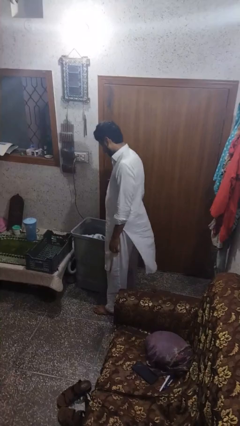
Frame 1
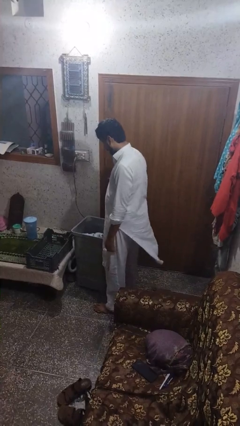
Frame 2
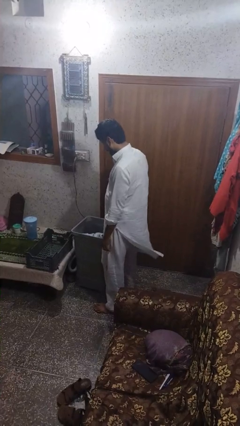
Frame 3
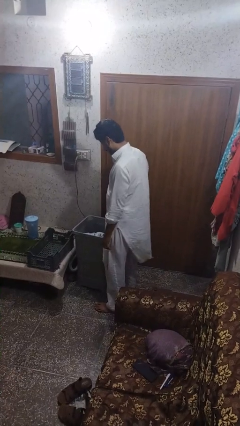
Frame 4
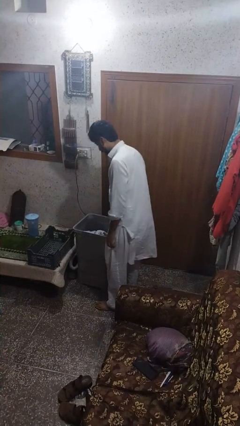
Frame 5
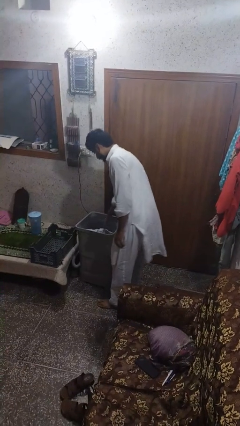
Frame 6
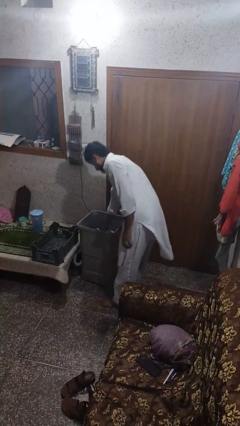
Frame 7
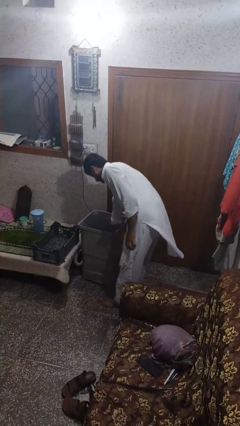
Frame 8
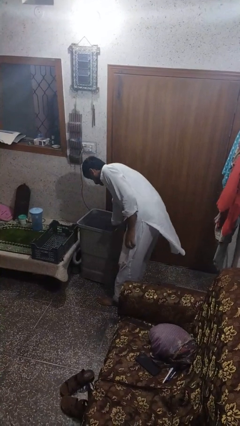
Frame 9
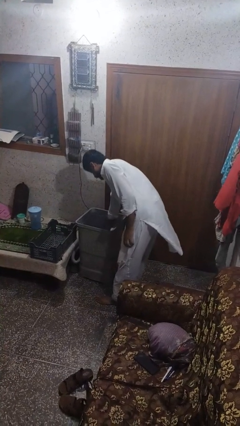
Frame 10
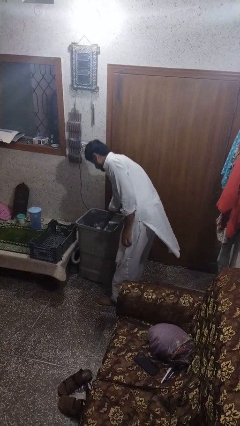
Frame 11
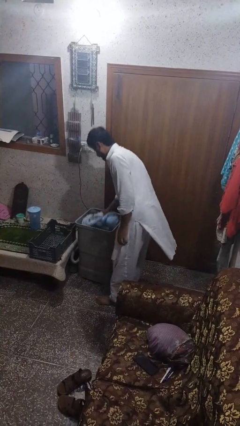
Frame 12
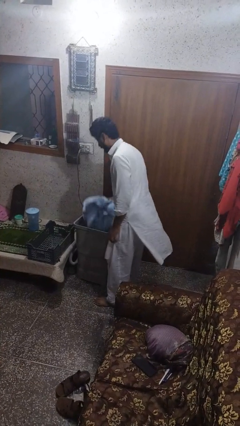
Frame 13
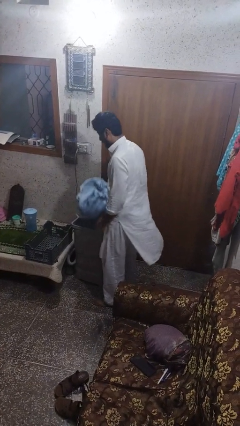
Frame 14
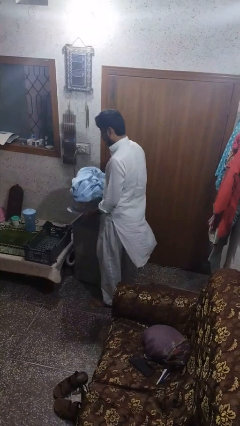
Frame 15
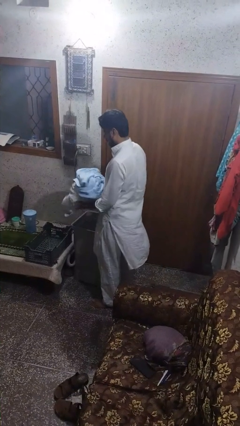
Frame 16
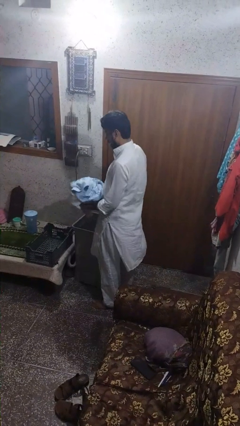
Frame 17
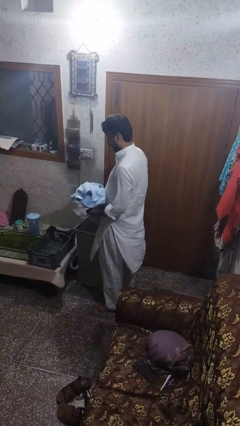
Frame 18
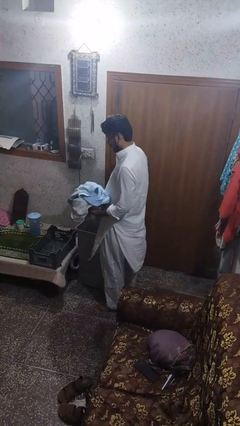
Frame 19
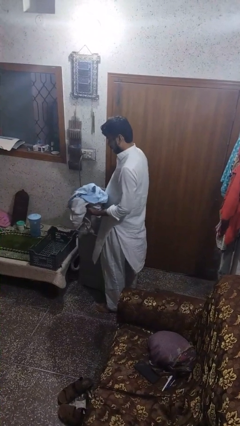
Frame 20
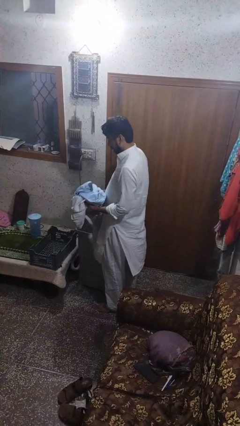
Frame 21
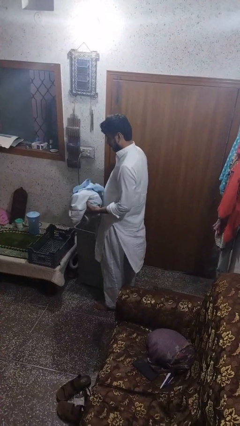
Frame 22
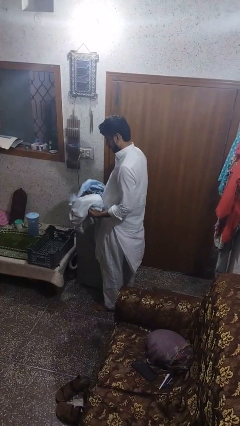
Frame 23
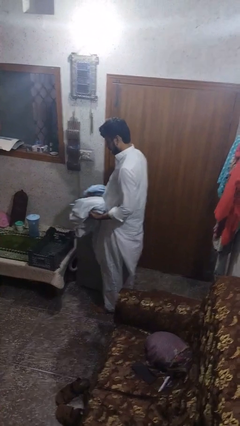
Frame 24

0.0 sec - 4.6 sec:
person unloads dryer

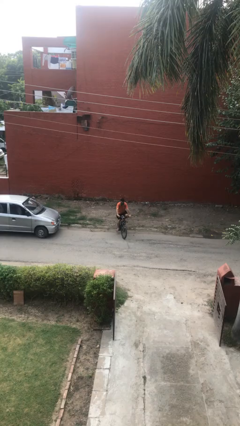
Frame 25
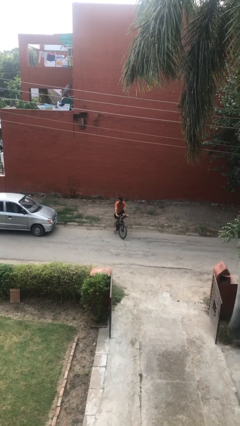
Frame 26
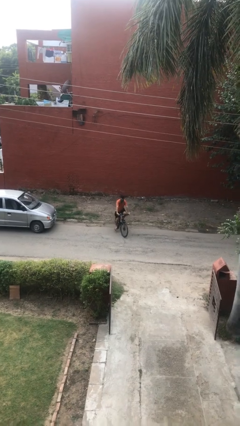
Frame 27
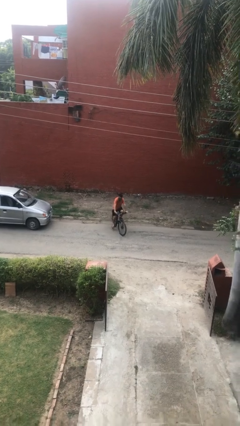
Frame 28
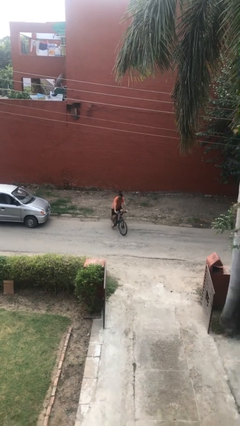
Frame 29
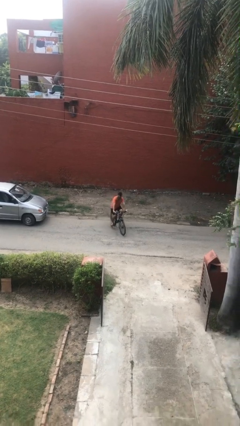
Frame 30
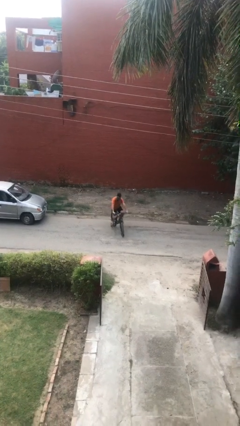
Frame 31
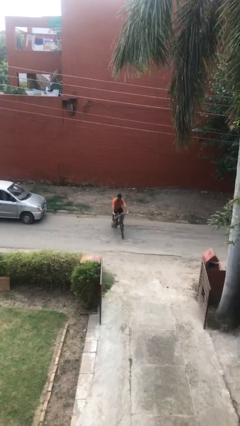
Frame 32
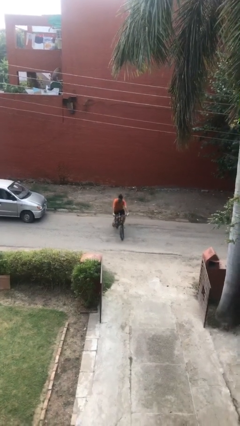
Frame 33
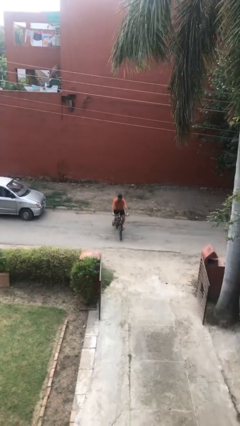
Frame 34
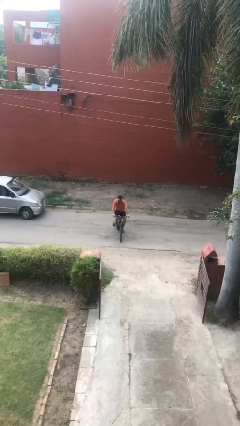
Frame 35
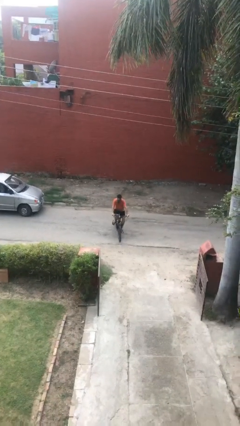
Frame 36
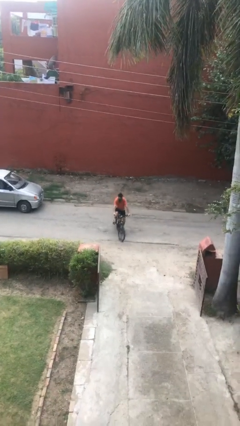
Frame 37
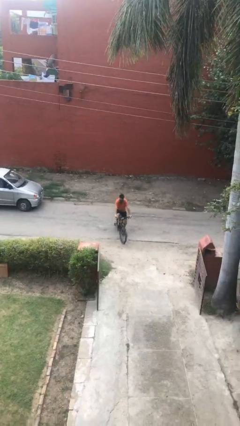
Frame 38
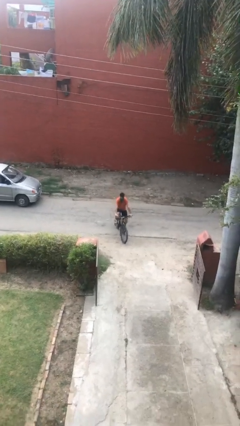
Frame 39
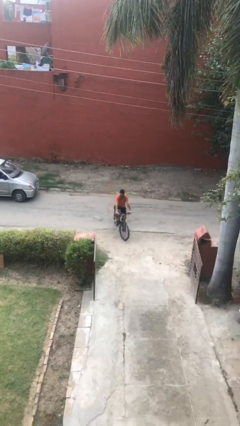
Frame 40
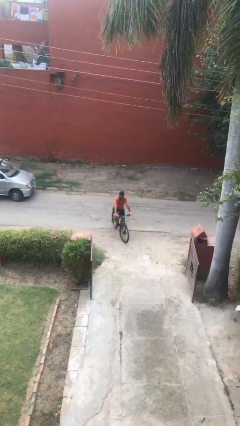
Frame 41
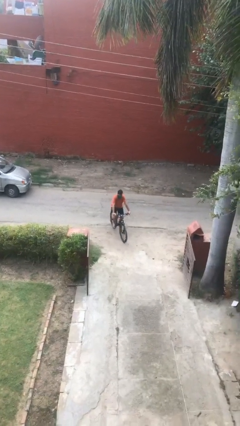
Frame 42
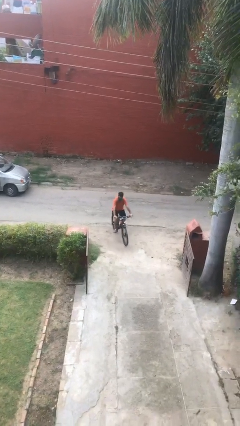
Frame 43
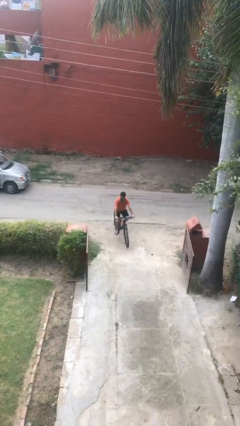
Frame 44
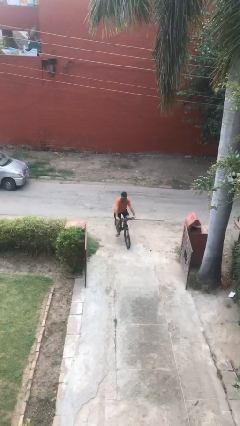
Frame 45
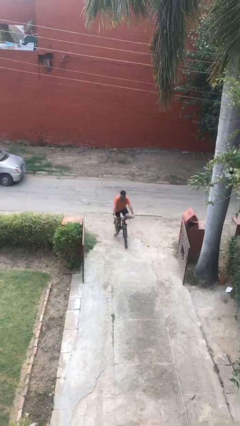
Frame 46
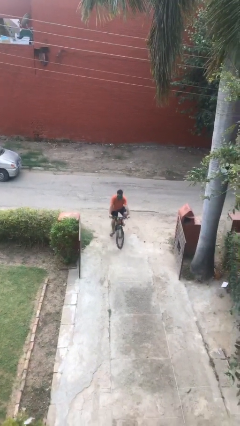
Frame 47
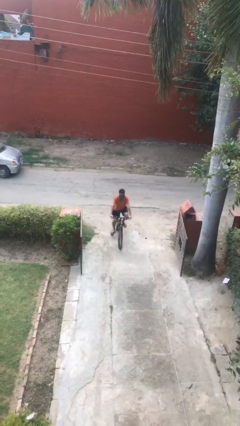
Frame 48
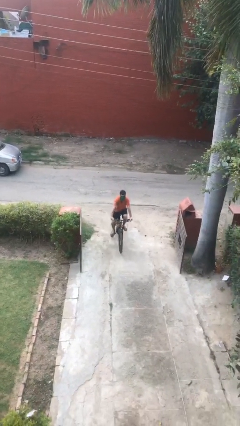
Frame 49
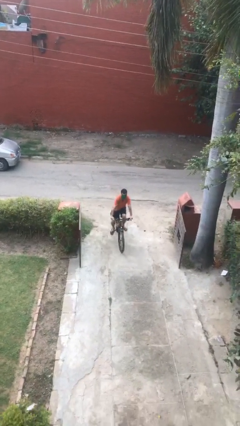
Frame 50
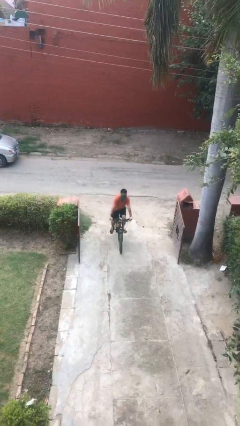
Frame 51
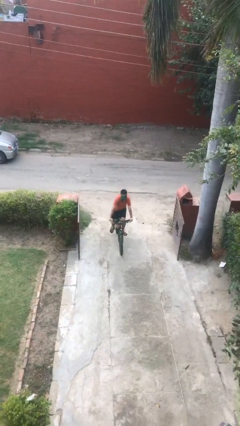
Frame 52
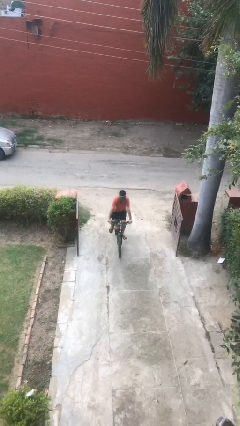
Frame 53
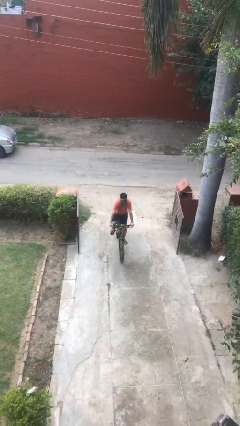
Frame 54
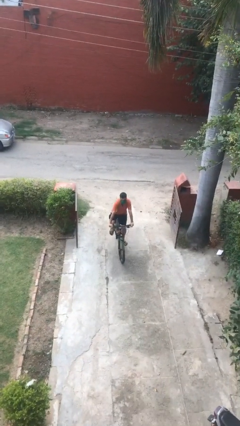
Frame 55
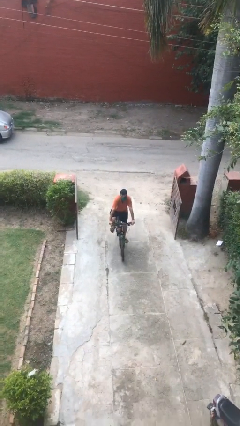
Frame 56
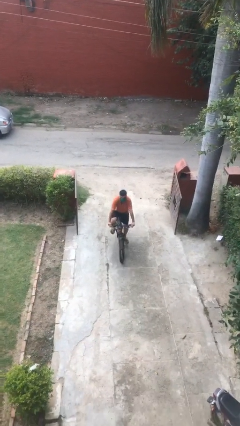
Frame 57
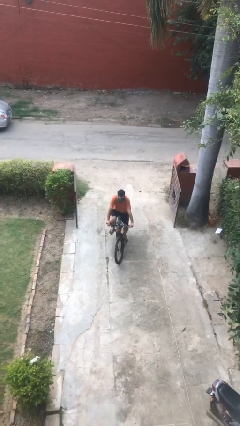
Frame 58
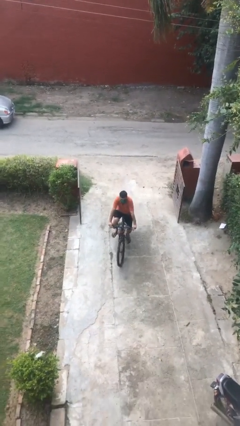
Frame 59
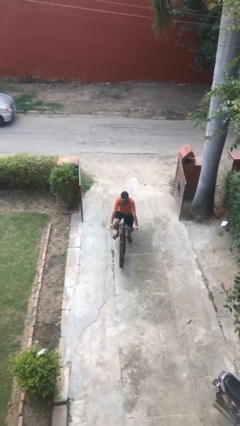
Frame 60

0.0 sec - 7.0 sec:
person rides bicycle

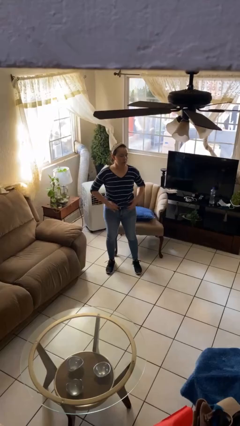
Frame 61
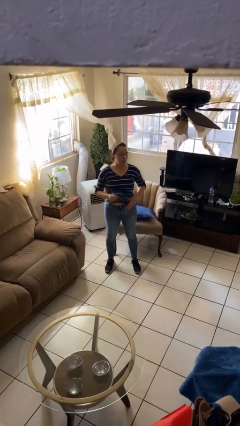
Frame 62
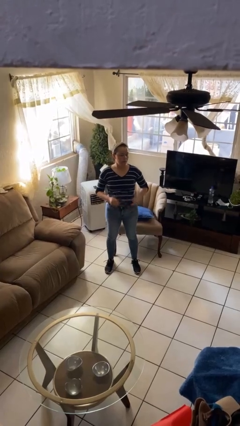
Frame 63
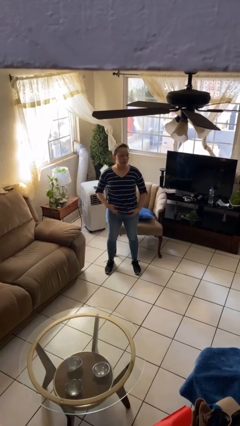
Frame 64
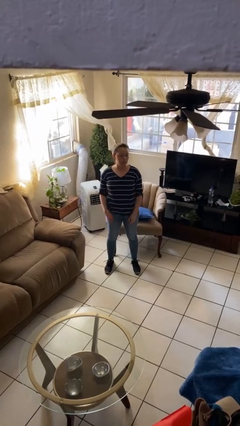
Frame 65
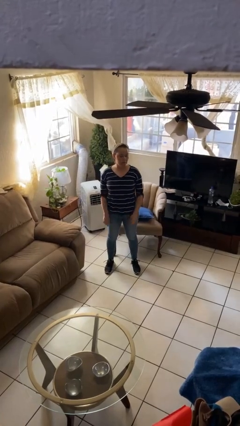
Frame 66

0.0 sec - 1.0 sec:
person untucks shirt

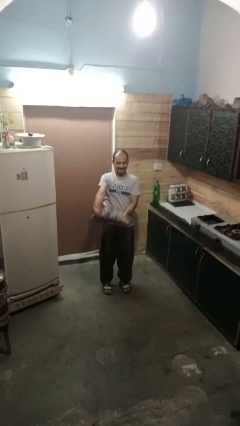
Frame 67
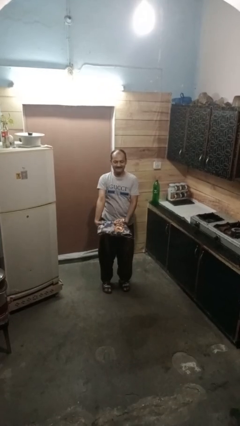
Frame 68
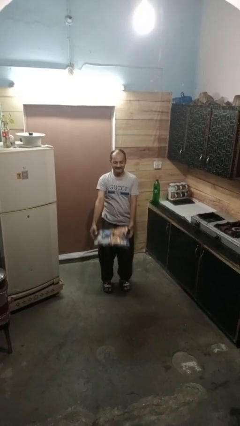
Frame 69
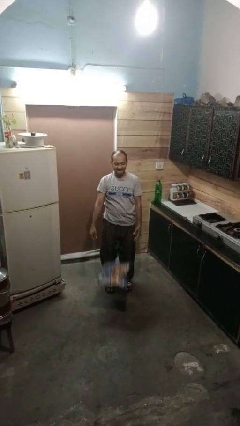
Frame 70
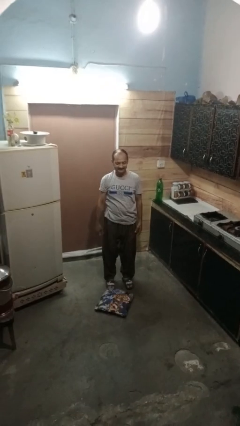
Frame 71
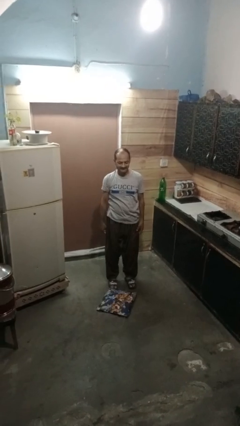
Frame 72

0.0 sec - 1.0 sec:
person catches dropped object

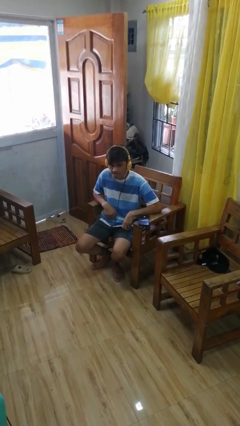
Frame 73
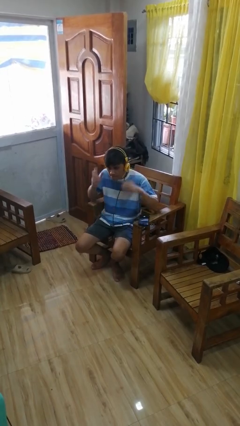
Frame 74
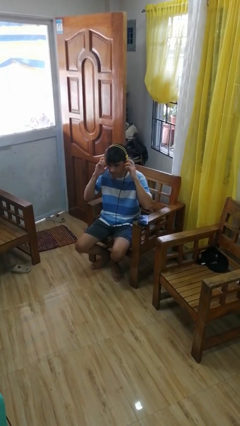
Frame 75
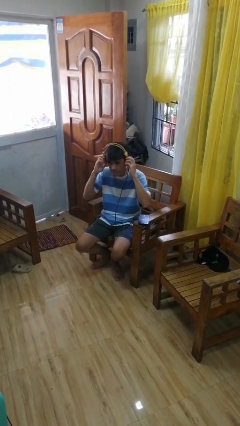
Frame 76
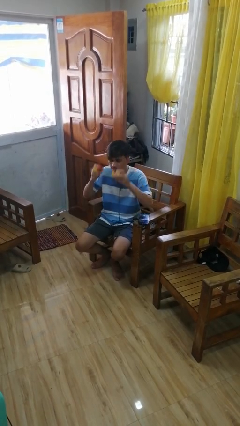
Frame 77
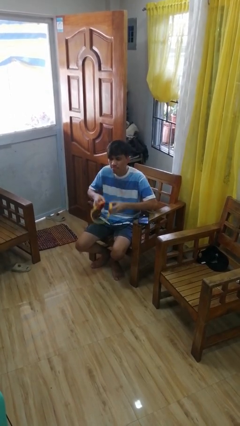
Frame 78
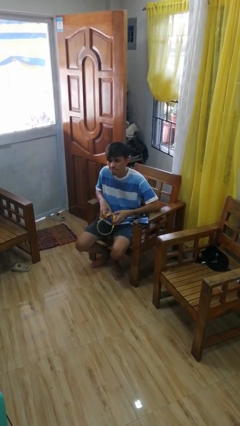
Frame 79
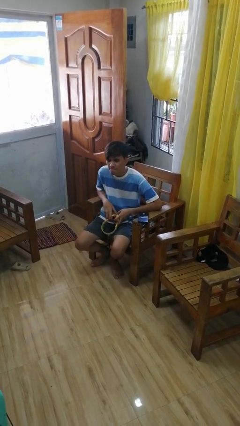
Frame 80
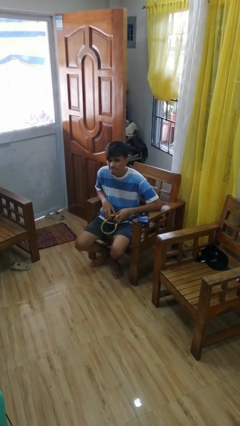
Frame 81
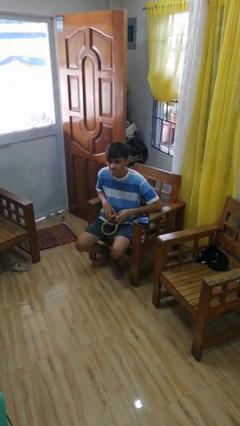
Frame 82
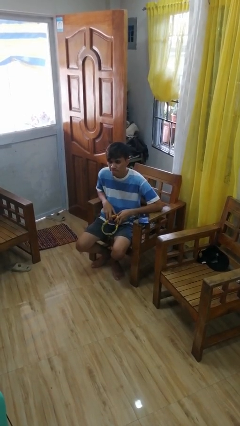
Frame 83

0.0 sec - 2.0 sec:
person takes off headphones

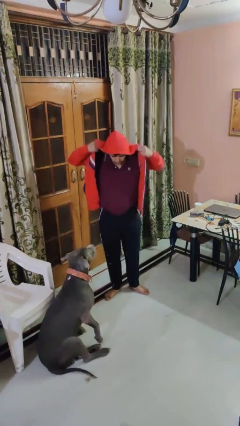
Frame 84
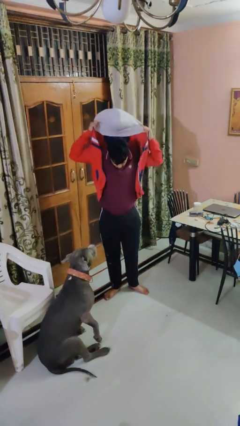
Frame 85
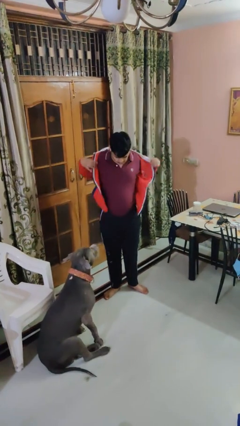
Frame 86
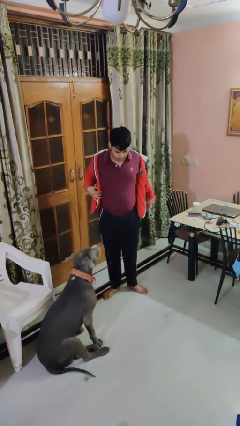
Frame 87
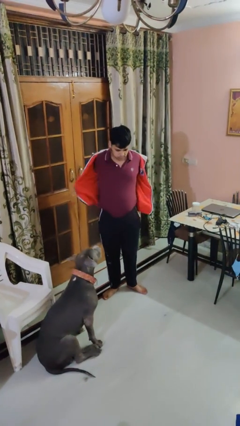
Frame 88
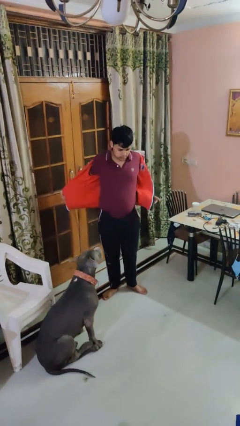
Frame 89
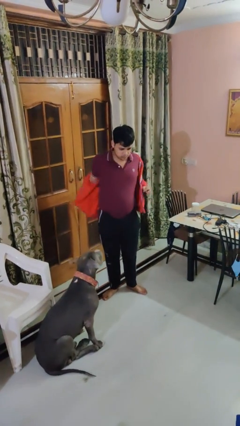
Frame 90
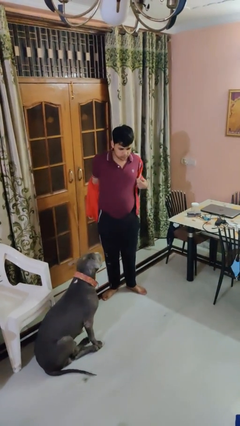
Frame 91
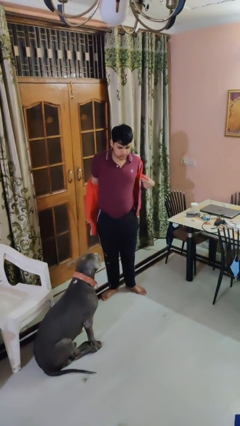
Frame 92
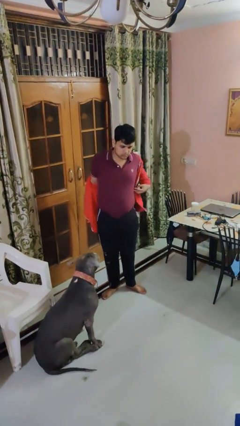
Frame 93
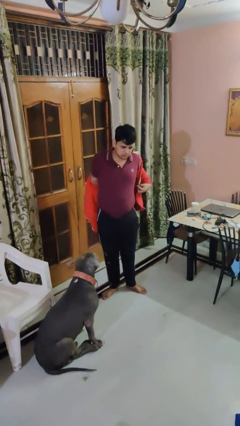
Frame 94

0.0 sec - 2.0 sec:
person takes off hoodie
